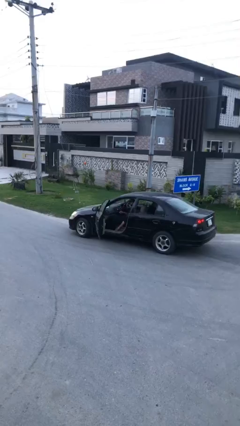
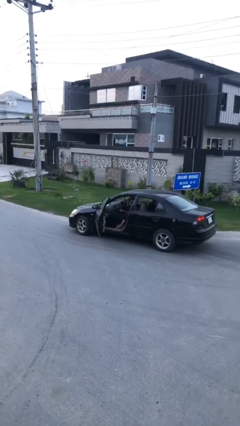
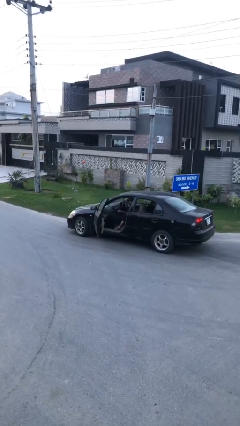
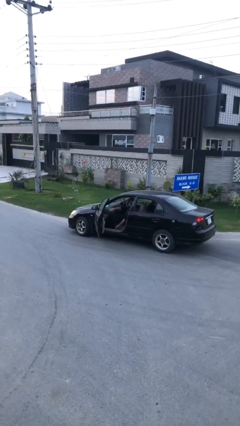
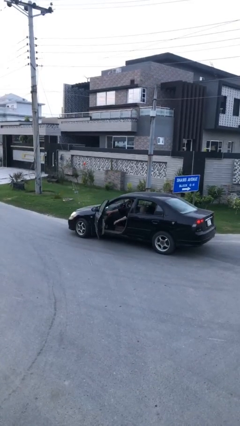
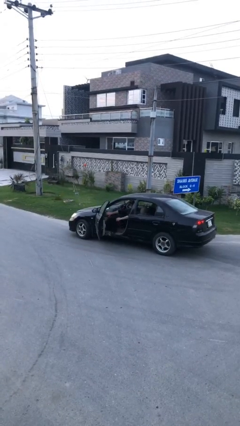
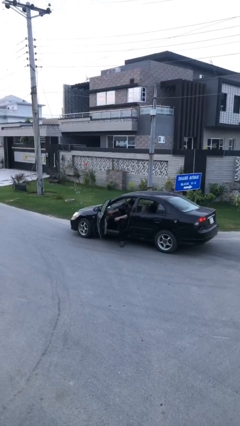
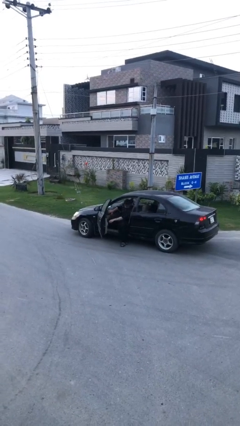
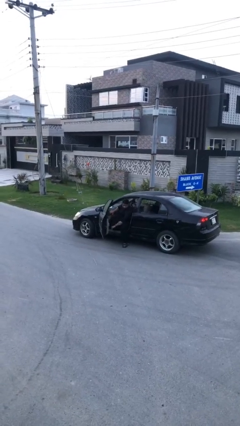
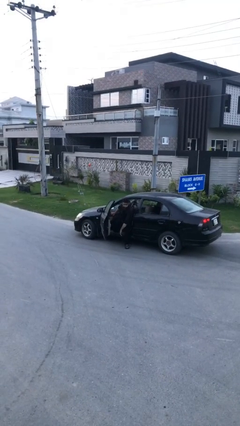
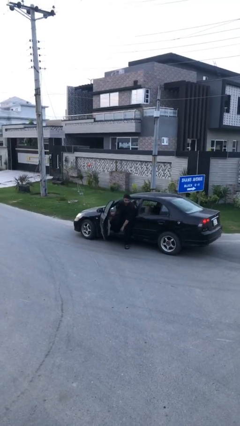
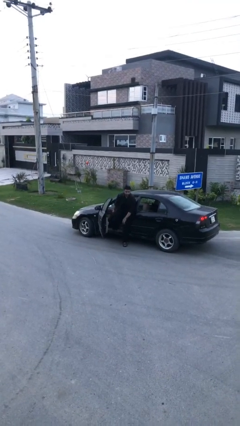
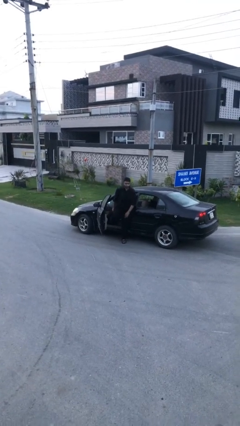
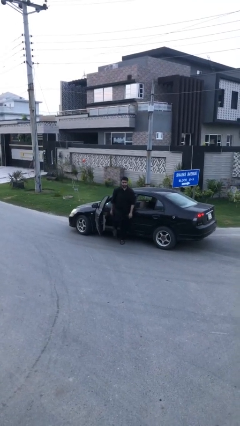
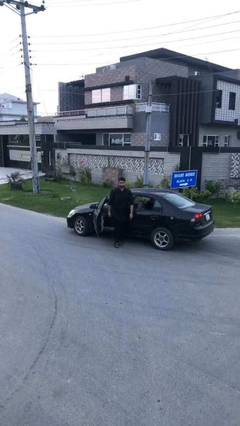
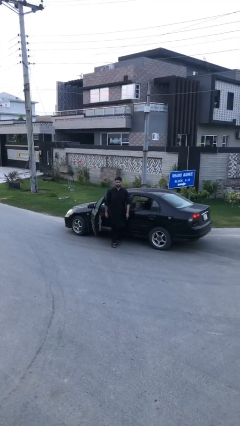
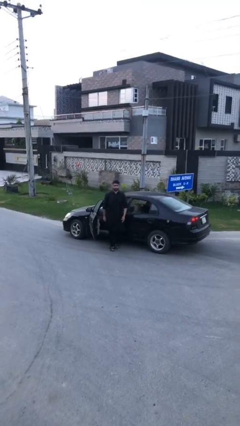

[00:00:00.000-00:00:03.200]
person exits car

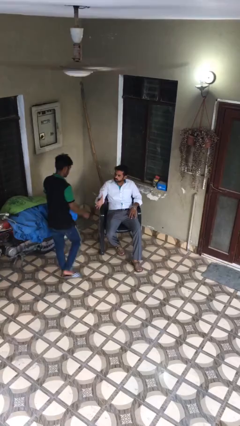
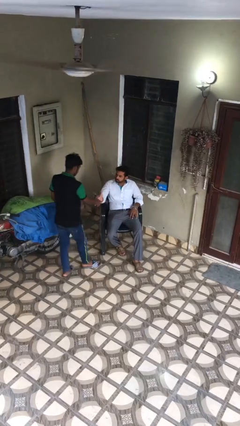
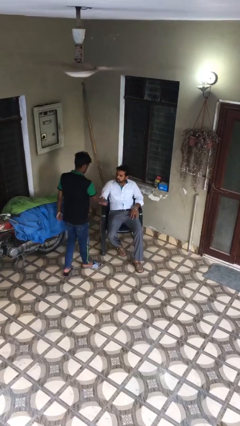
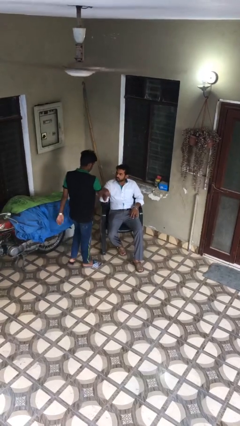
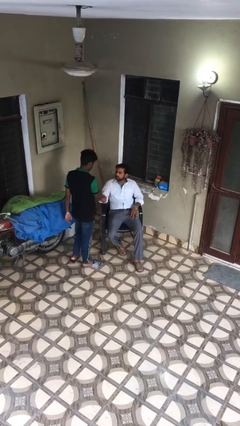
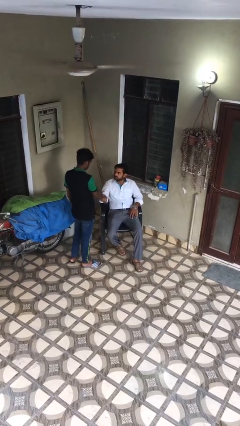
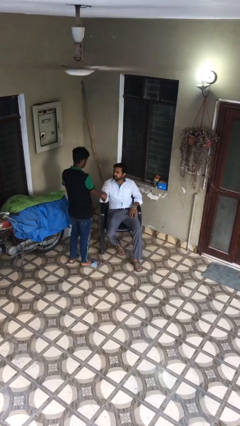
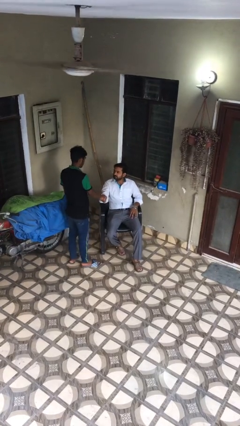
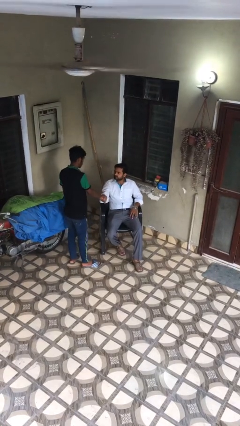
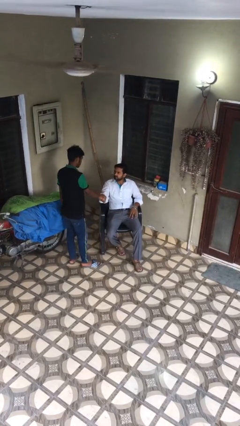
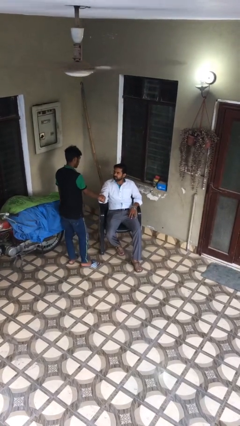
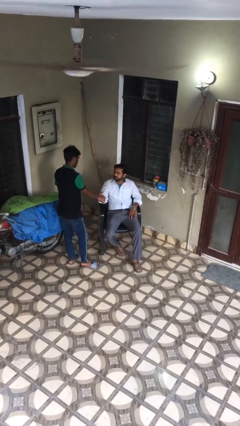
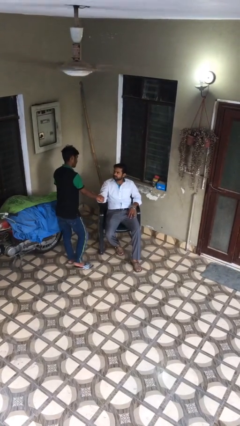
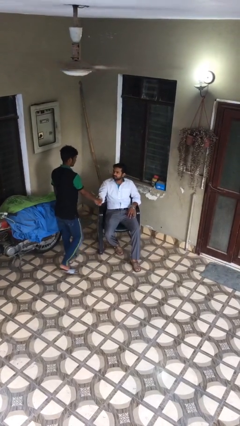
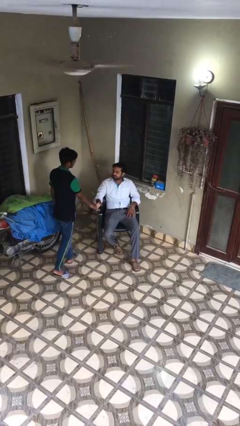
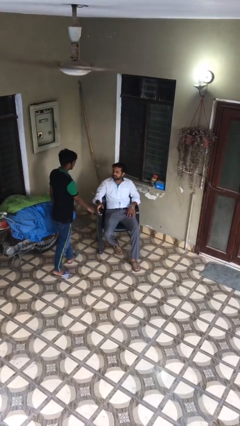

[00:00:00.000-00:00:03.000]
person shakes hand

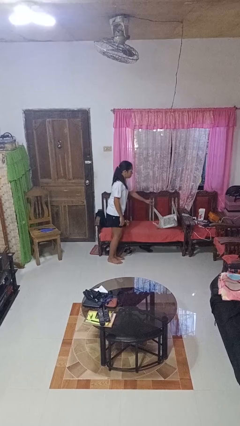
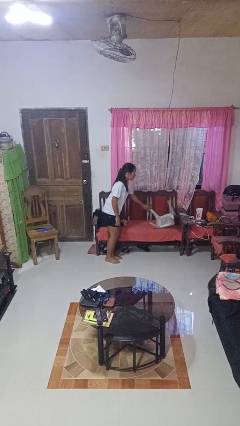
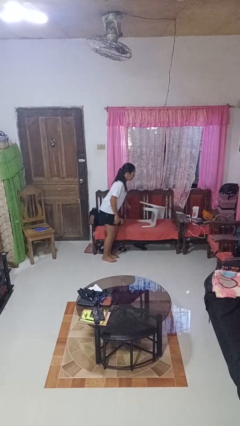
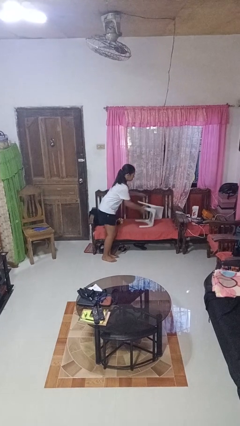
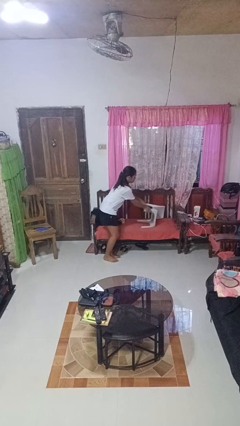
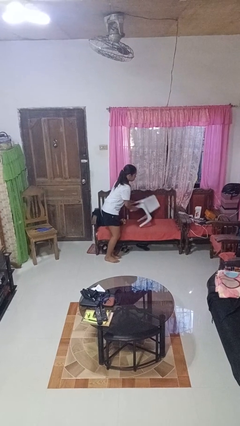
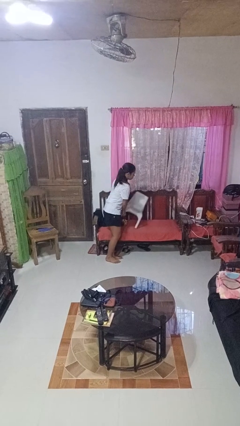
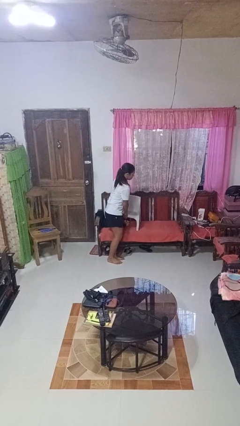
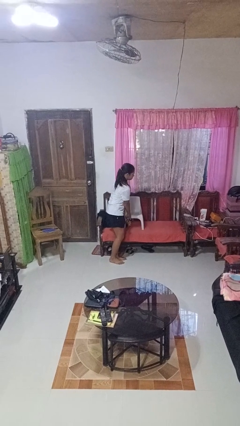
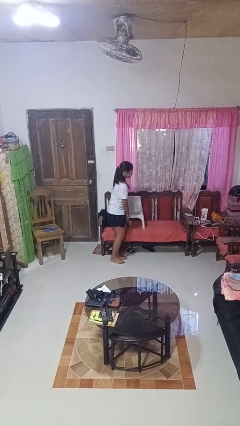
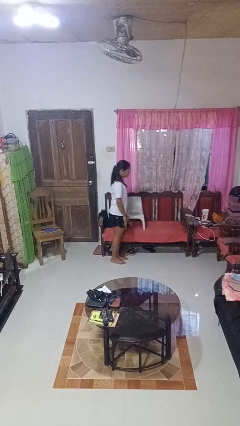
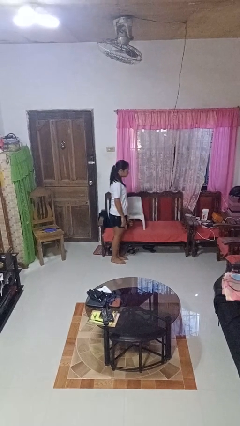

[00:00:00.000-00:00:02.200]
person sets upright furniture

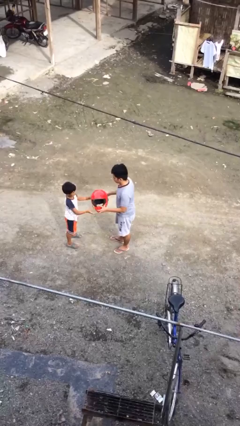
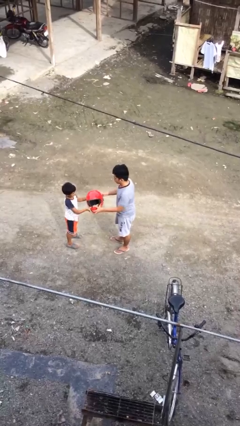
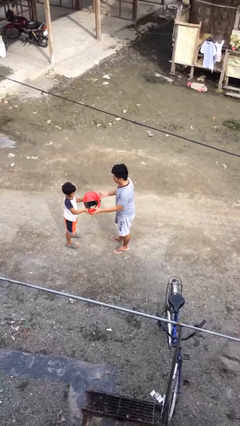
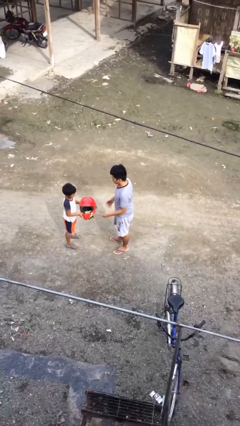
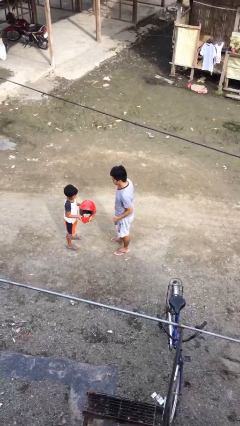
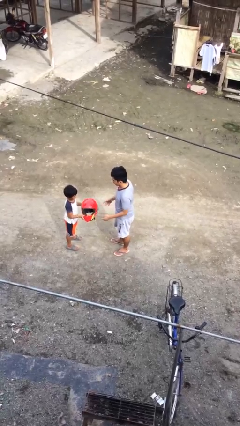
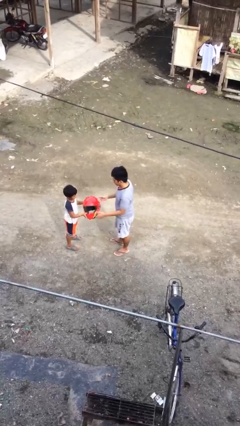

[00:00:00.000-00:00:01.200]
person transfers object to person

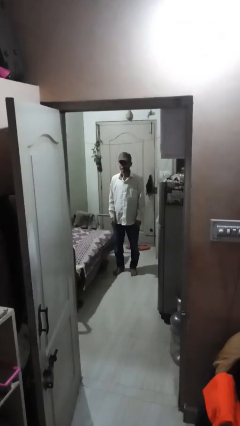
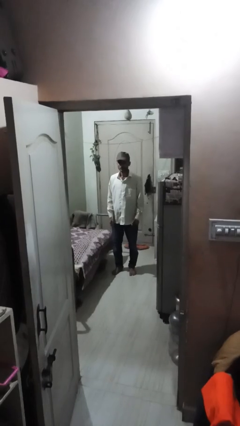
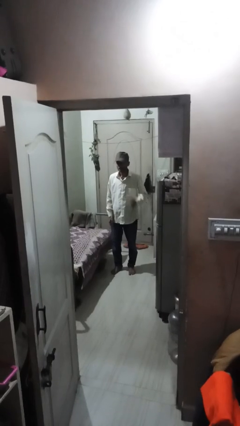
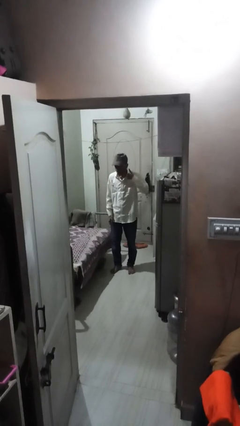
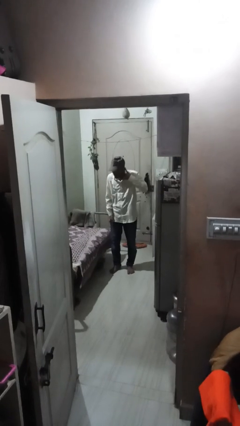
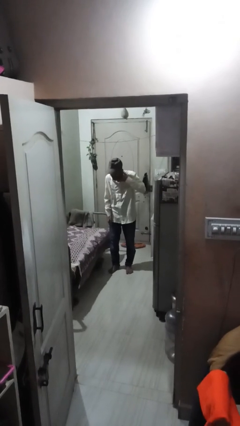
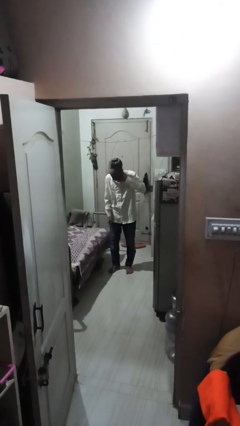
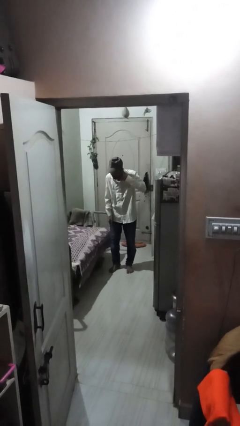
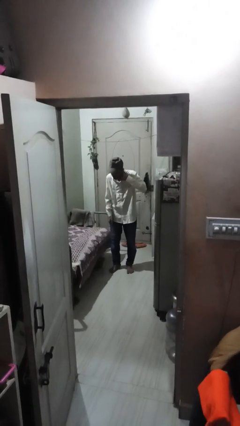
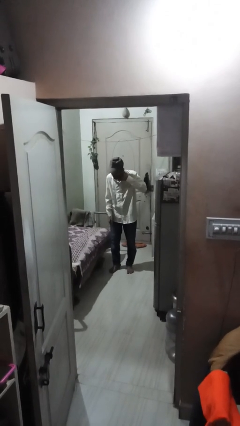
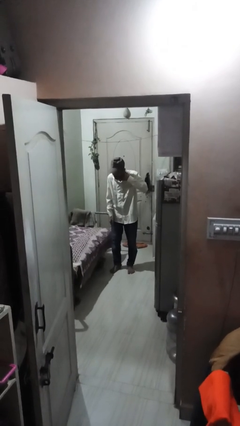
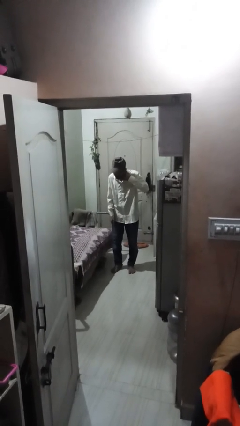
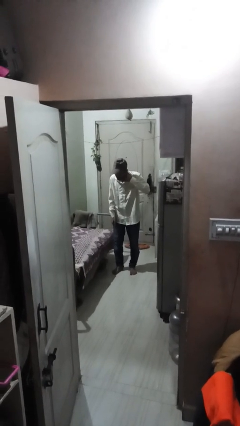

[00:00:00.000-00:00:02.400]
person gestures call me

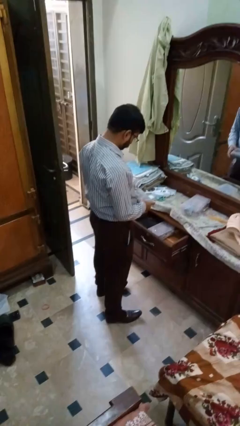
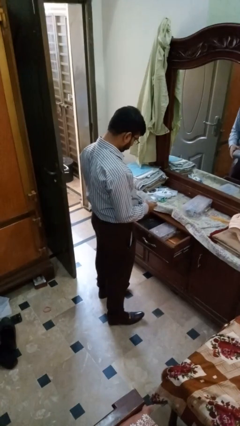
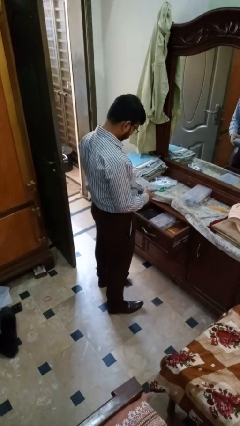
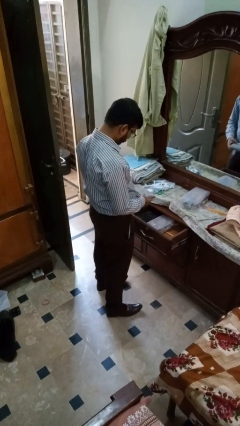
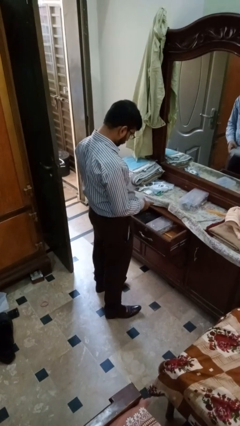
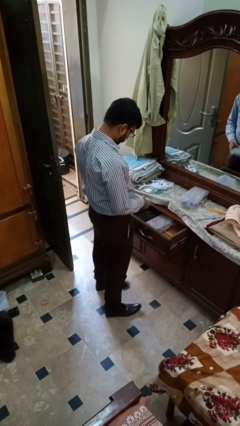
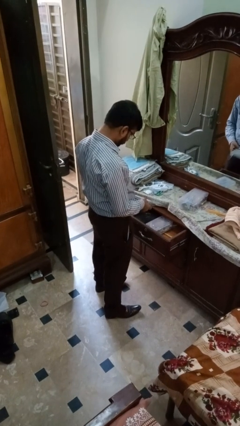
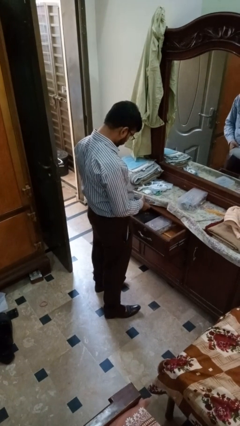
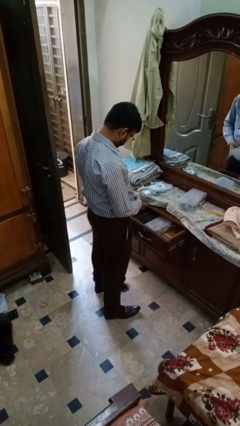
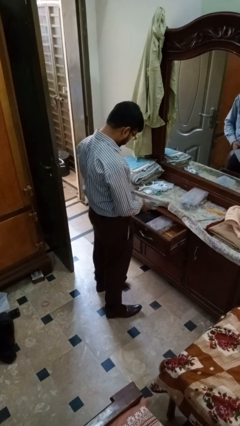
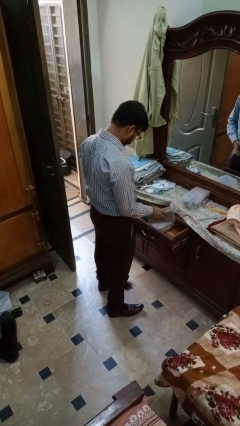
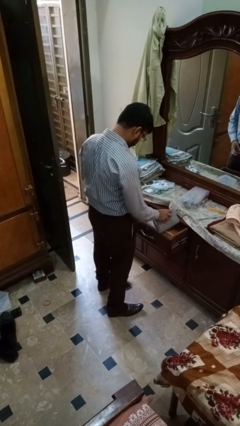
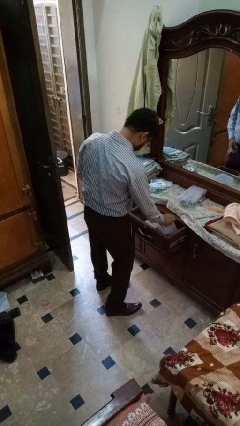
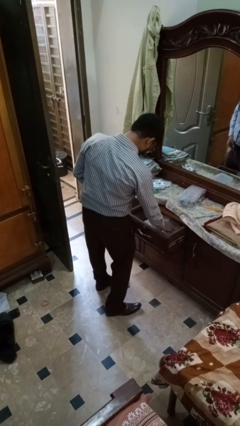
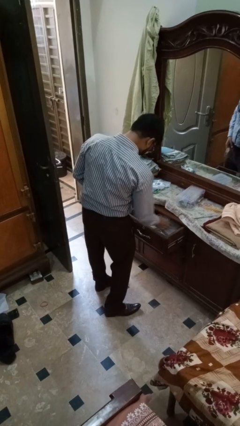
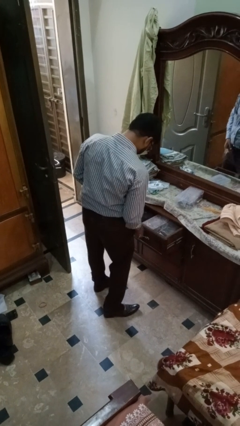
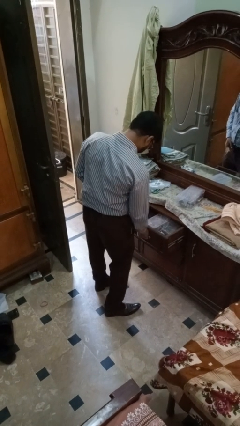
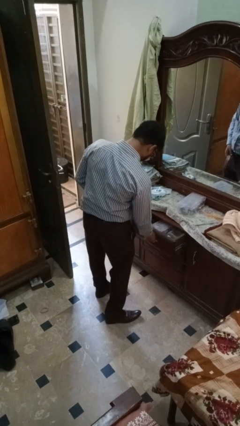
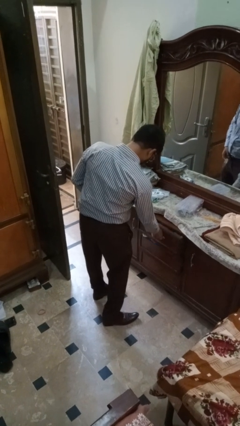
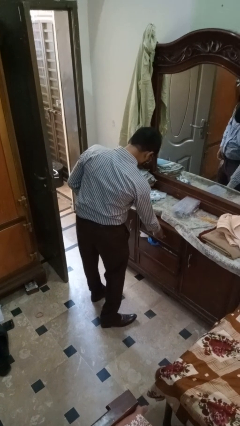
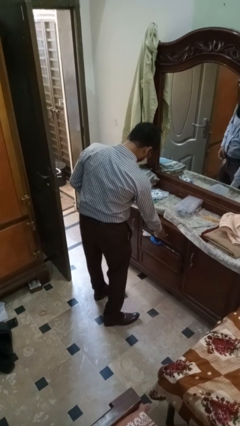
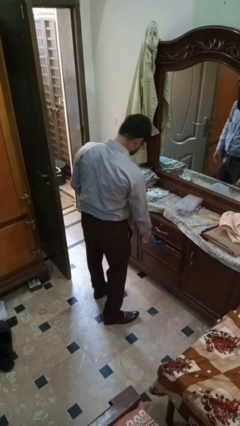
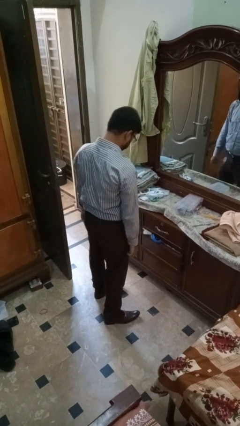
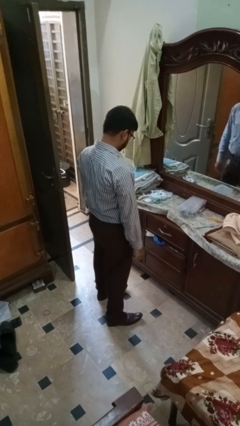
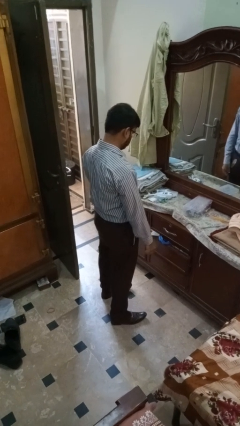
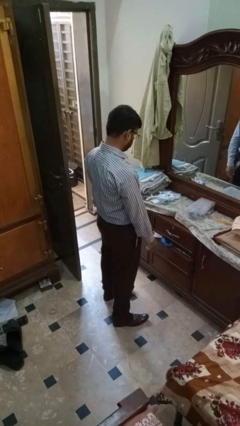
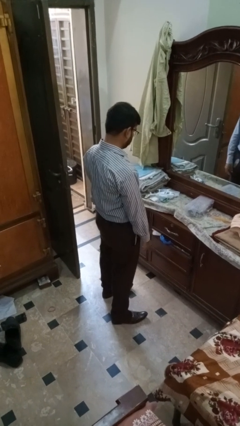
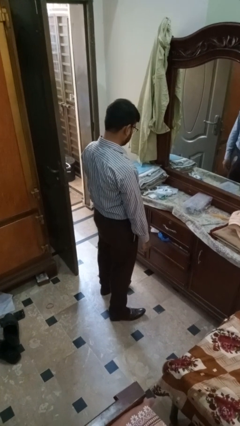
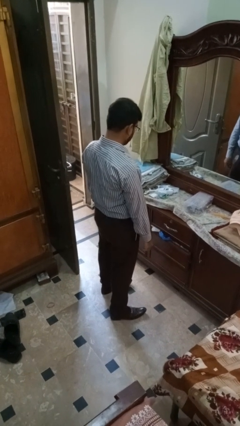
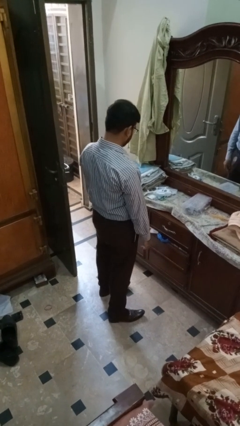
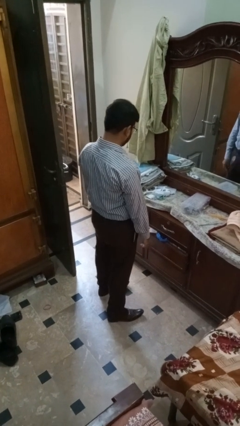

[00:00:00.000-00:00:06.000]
person puts clothes into dresser
